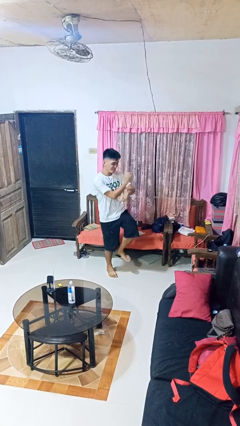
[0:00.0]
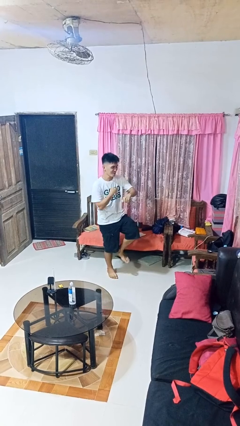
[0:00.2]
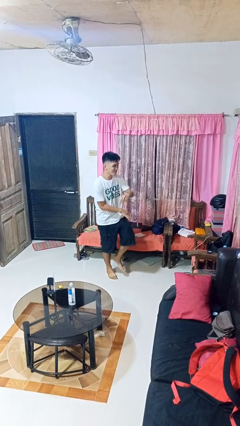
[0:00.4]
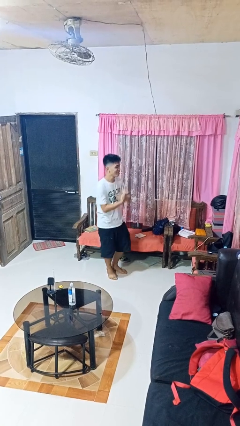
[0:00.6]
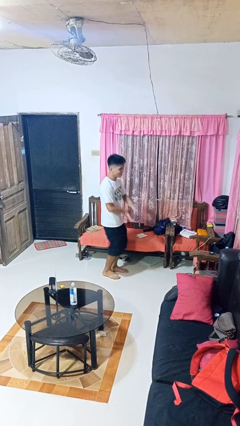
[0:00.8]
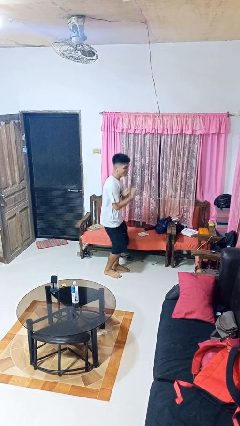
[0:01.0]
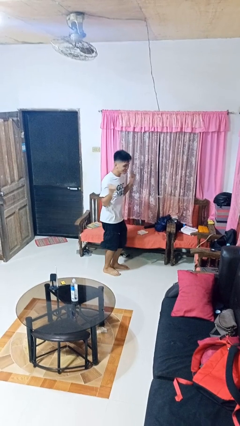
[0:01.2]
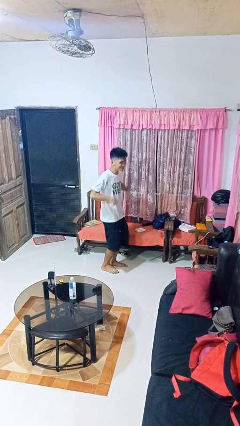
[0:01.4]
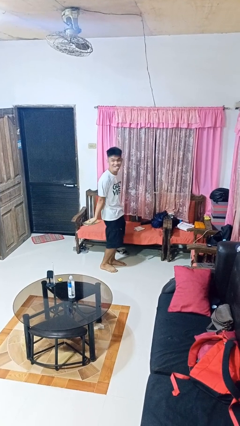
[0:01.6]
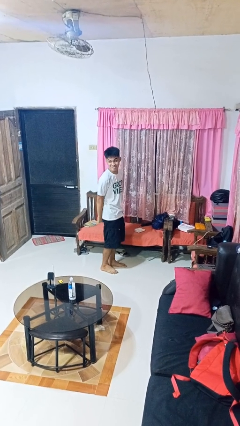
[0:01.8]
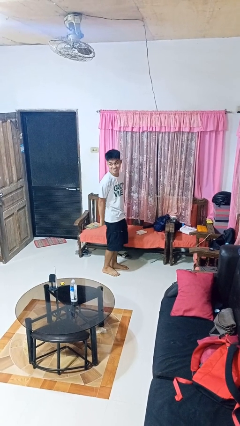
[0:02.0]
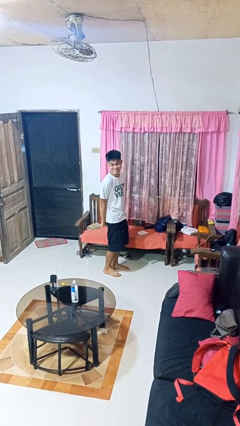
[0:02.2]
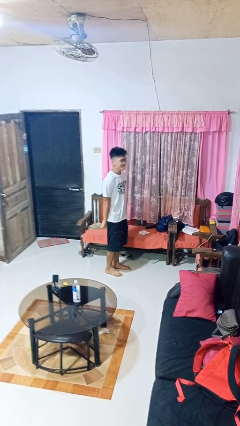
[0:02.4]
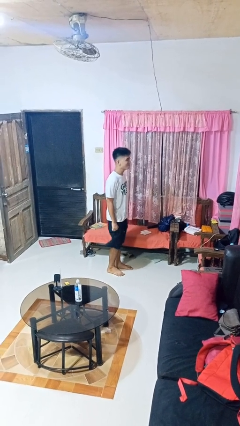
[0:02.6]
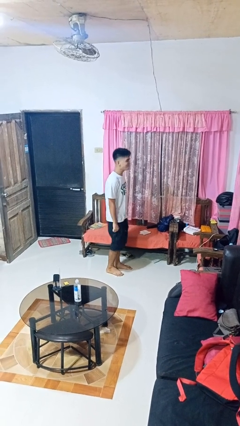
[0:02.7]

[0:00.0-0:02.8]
person dances in place

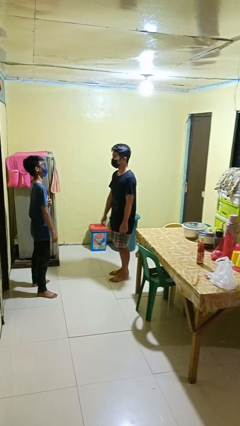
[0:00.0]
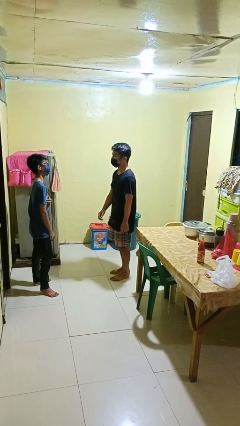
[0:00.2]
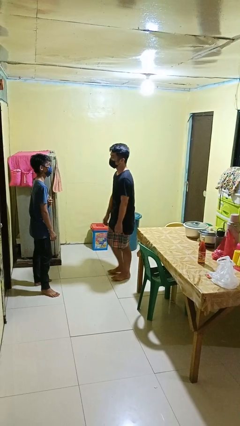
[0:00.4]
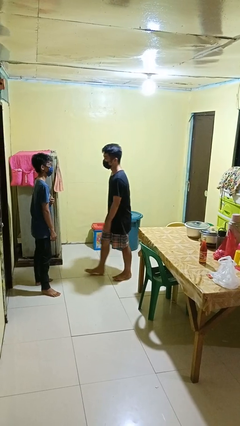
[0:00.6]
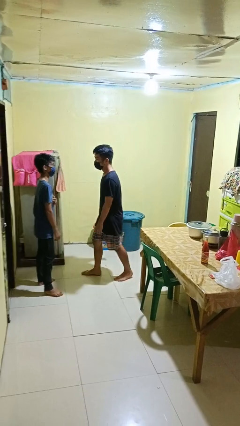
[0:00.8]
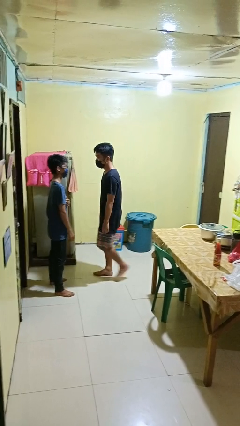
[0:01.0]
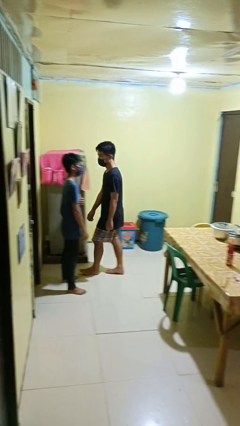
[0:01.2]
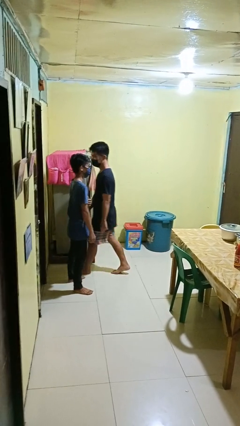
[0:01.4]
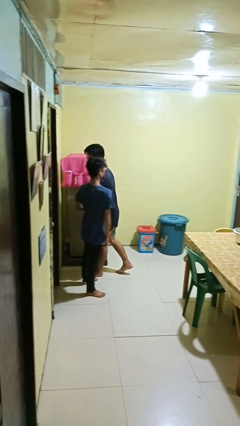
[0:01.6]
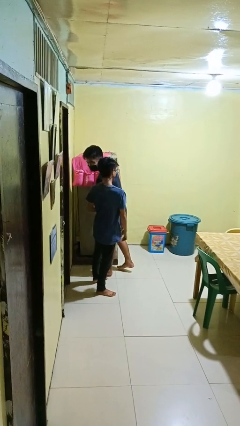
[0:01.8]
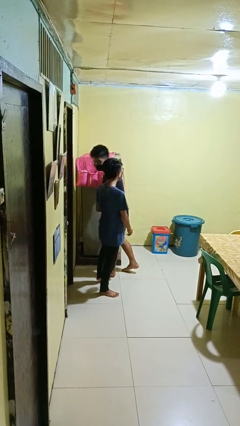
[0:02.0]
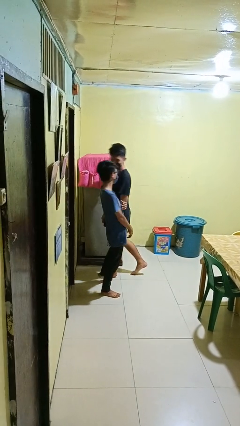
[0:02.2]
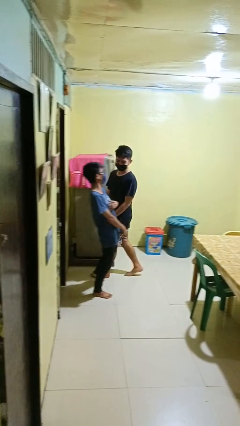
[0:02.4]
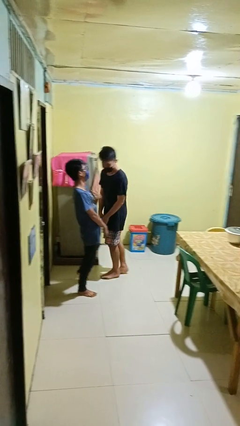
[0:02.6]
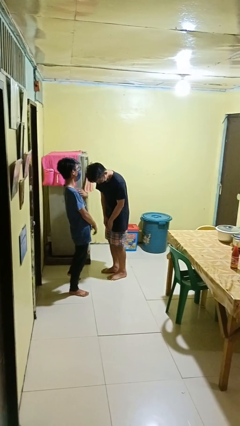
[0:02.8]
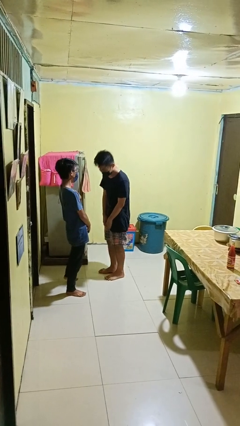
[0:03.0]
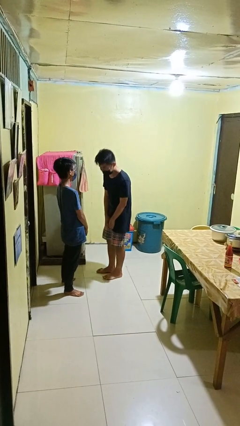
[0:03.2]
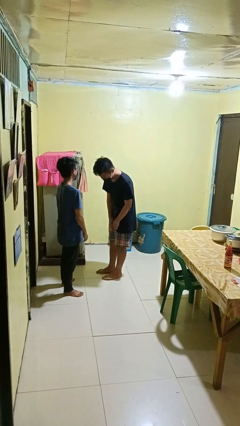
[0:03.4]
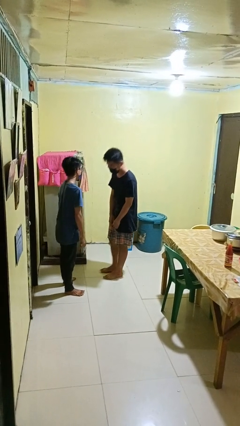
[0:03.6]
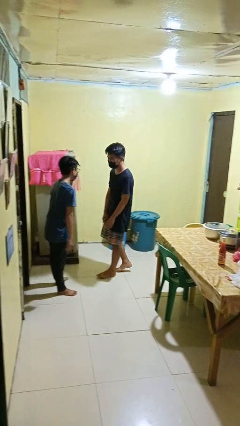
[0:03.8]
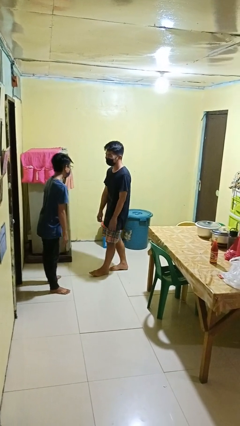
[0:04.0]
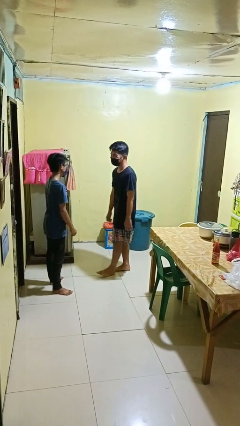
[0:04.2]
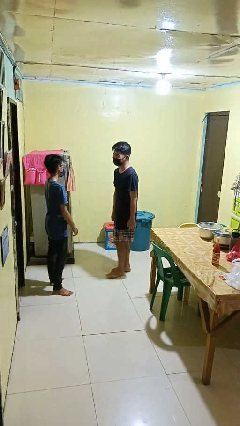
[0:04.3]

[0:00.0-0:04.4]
person bumps into person

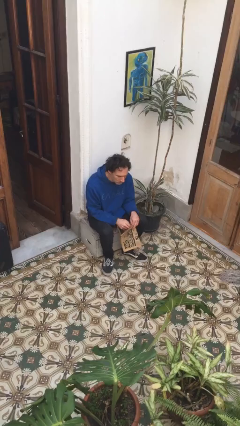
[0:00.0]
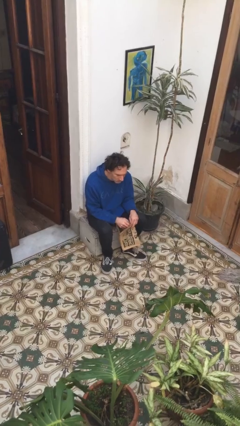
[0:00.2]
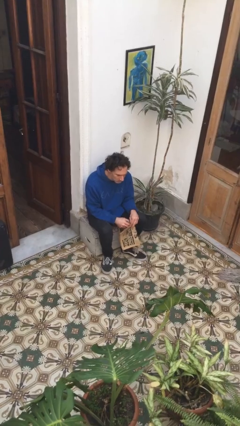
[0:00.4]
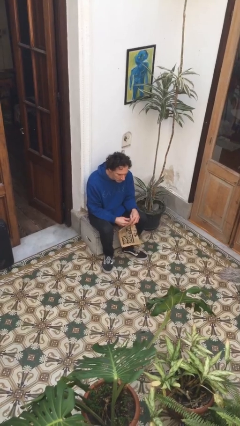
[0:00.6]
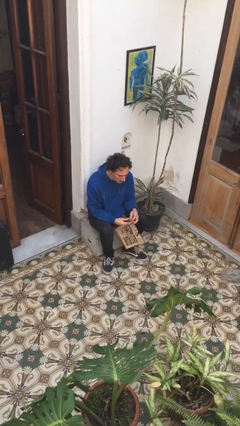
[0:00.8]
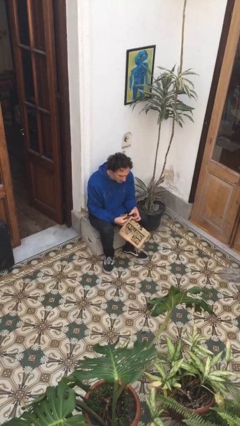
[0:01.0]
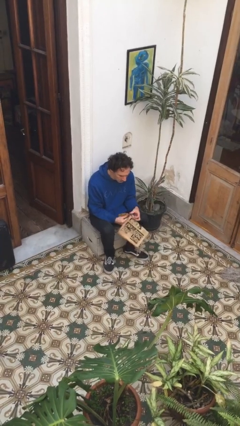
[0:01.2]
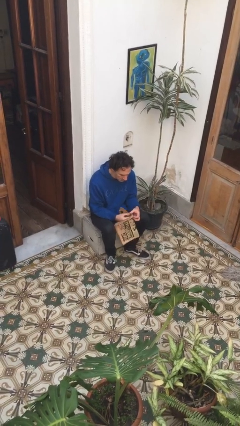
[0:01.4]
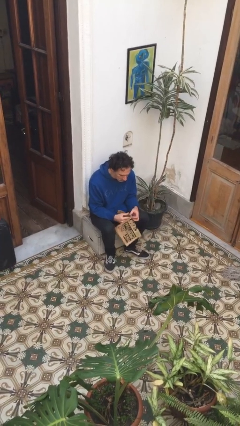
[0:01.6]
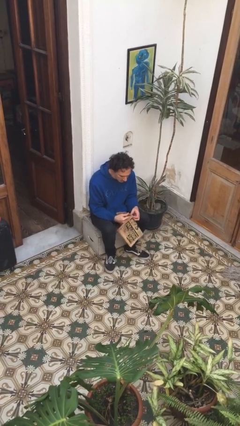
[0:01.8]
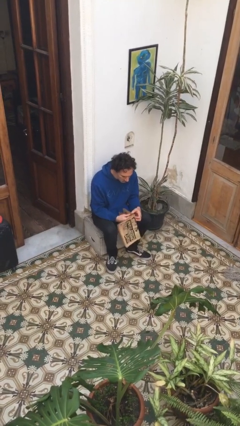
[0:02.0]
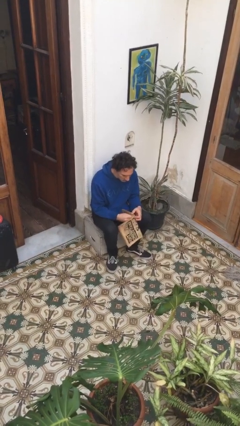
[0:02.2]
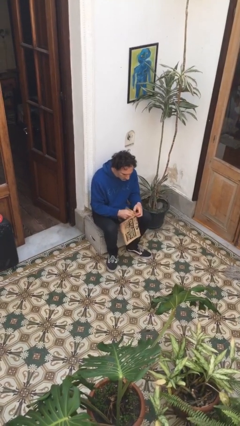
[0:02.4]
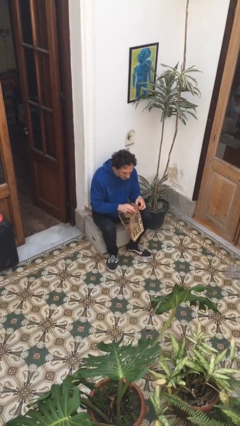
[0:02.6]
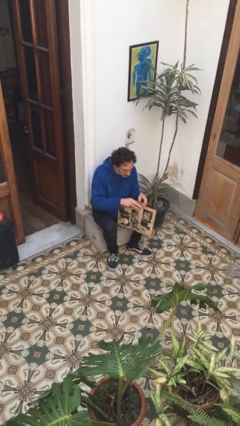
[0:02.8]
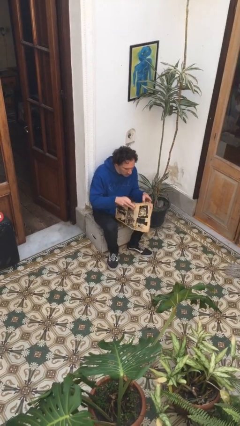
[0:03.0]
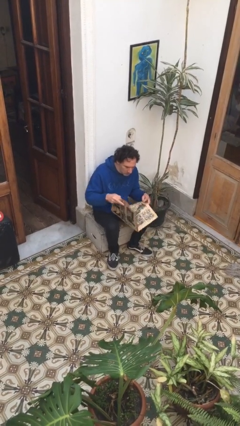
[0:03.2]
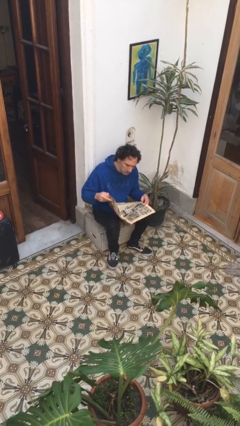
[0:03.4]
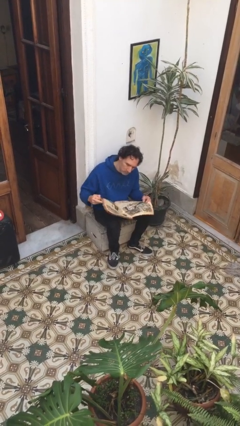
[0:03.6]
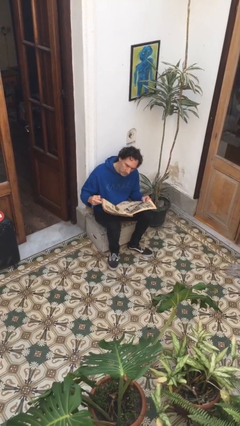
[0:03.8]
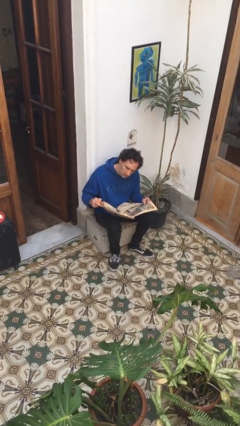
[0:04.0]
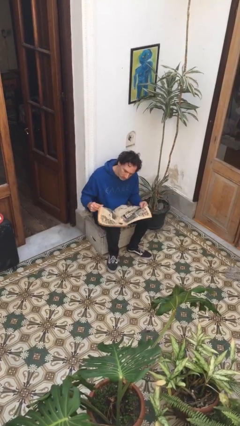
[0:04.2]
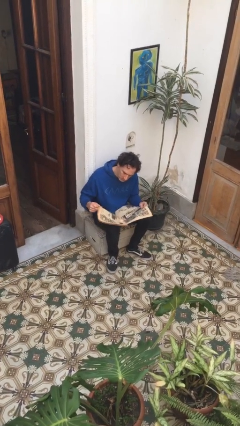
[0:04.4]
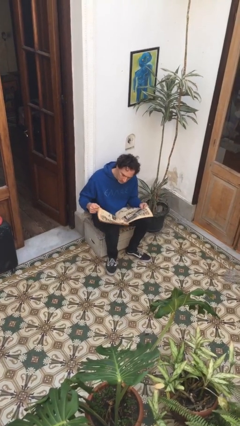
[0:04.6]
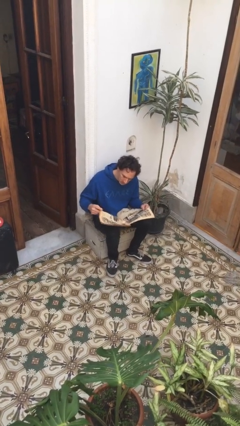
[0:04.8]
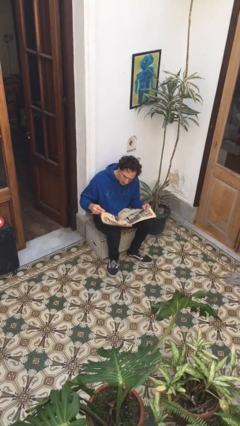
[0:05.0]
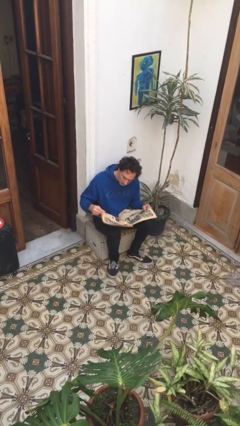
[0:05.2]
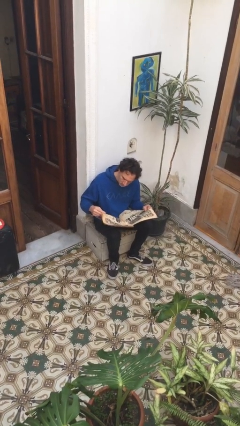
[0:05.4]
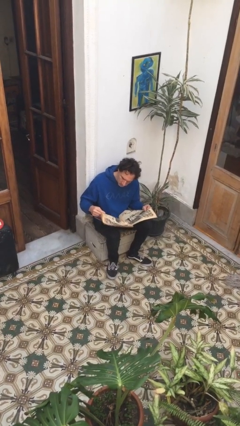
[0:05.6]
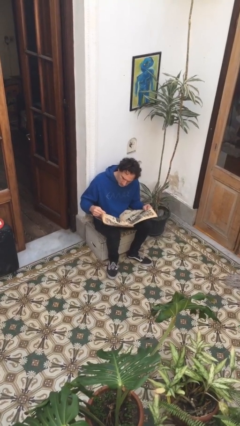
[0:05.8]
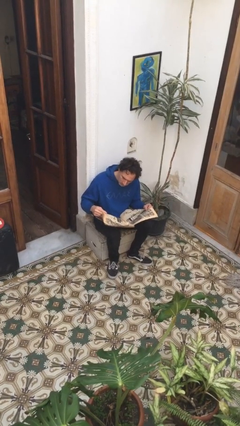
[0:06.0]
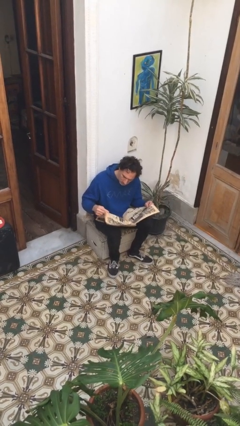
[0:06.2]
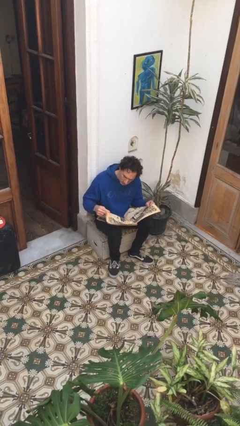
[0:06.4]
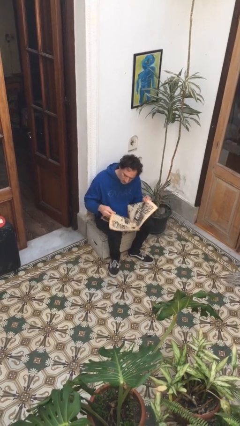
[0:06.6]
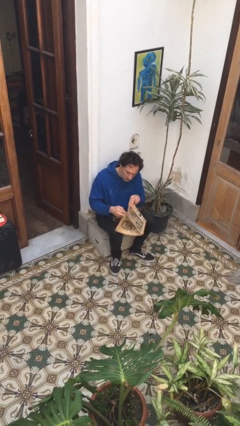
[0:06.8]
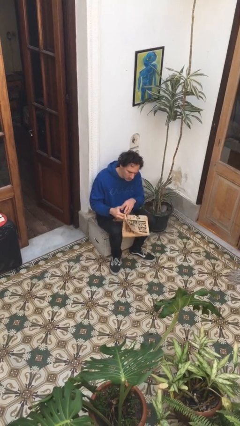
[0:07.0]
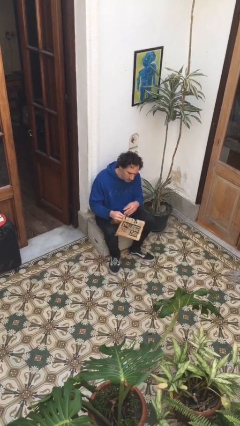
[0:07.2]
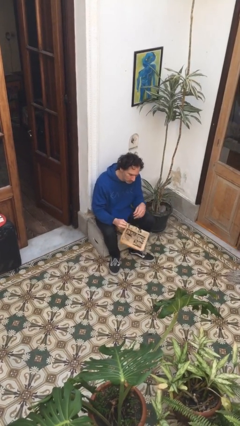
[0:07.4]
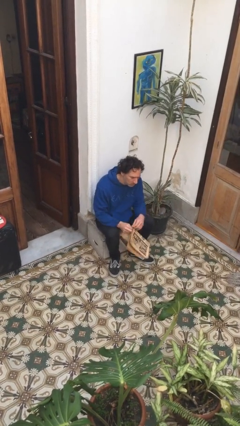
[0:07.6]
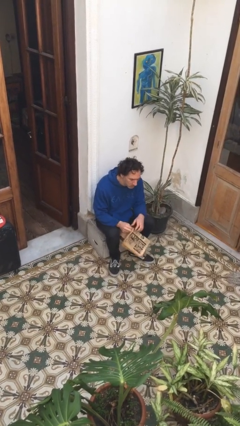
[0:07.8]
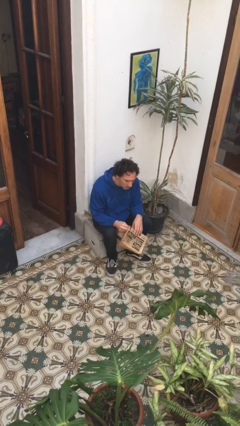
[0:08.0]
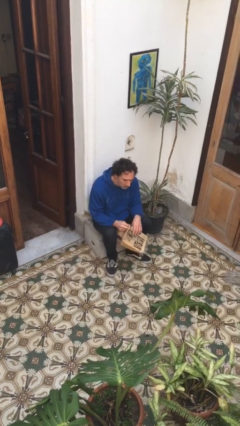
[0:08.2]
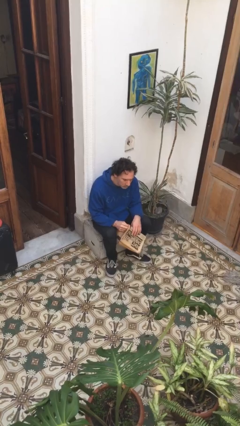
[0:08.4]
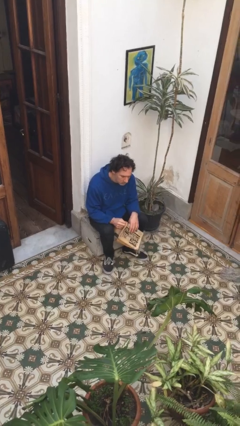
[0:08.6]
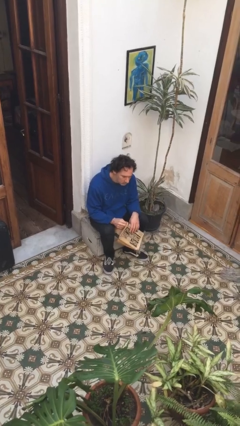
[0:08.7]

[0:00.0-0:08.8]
person reads newspaper

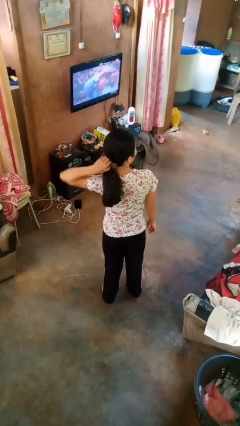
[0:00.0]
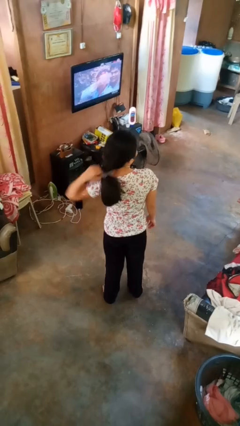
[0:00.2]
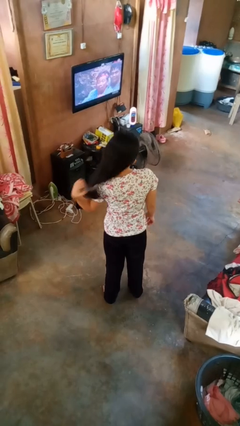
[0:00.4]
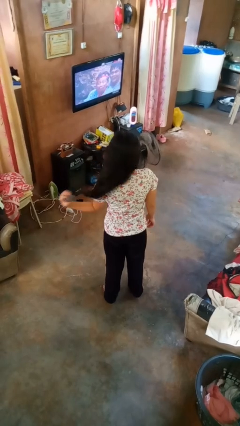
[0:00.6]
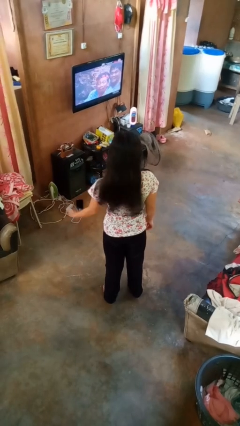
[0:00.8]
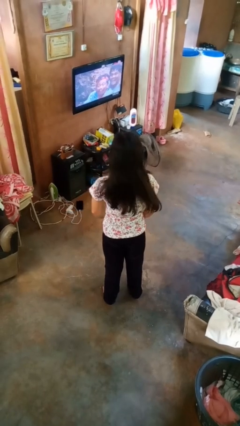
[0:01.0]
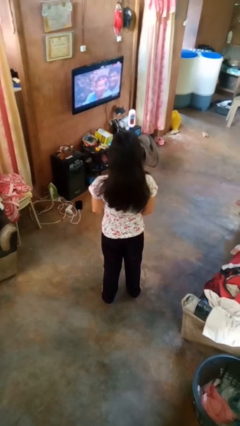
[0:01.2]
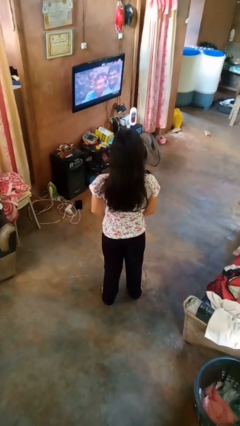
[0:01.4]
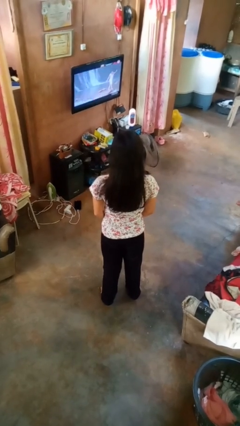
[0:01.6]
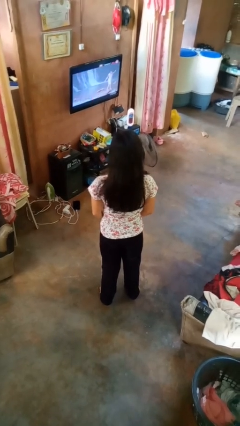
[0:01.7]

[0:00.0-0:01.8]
person takes off hairtie

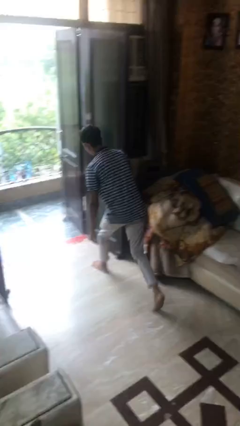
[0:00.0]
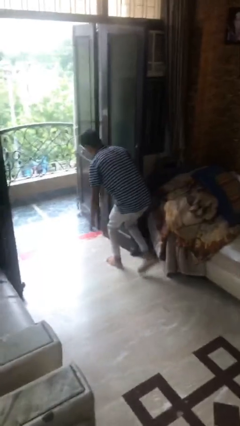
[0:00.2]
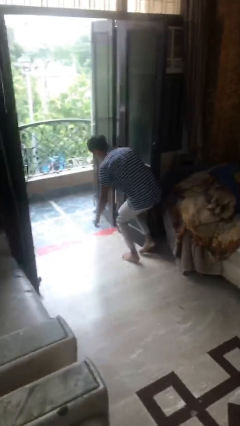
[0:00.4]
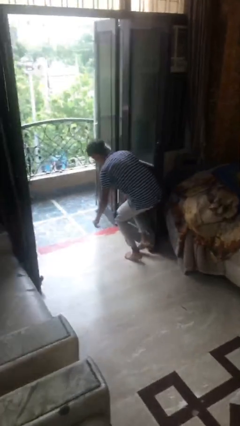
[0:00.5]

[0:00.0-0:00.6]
person trips on object on floor
